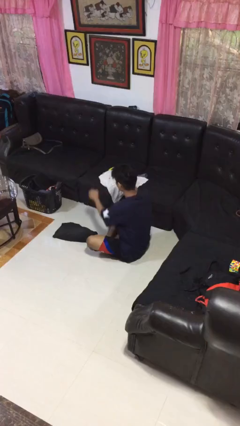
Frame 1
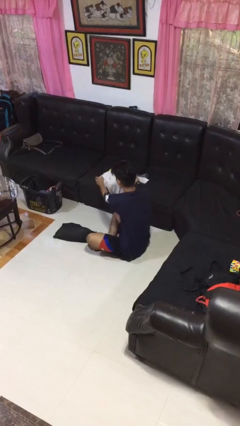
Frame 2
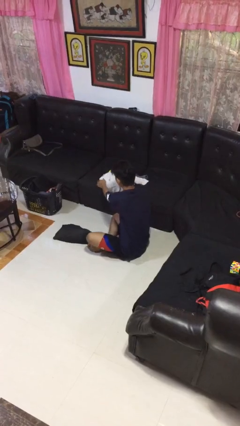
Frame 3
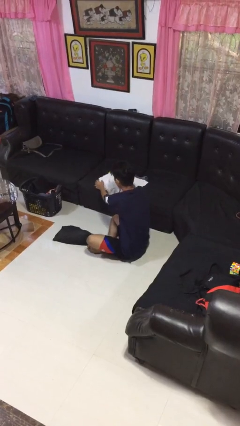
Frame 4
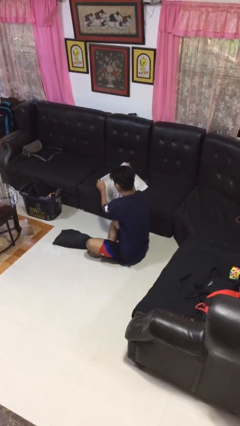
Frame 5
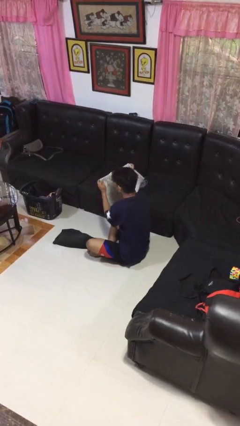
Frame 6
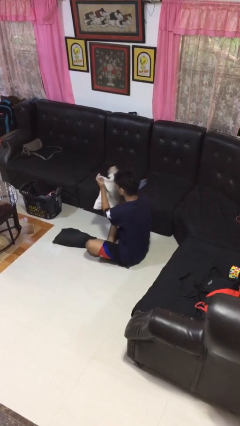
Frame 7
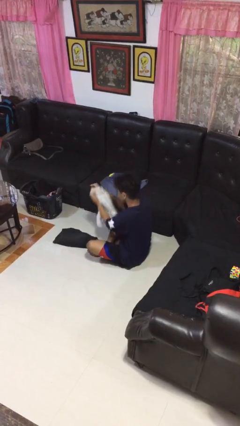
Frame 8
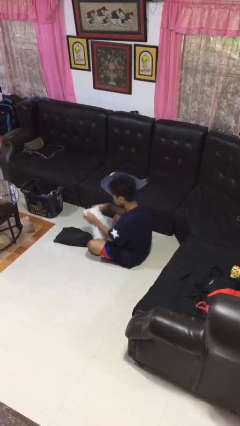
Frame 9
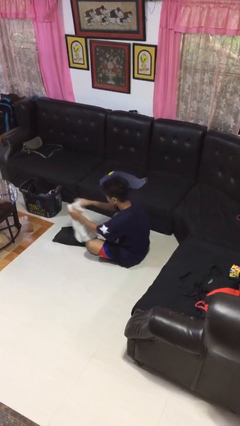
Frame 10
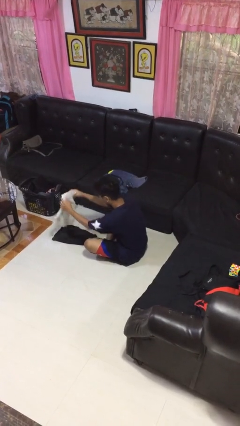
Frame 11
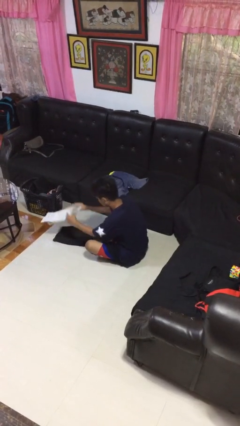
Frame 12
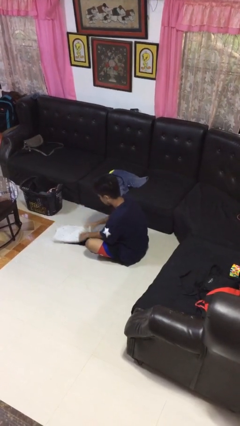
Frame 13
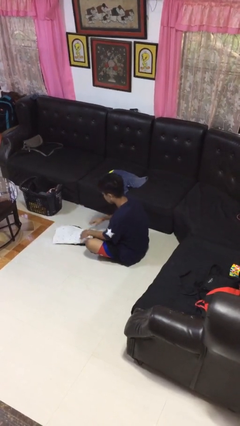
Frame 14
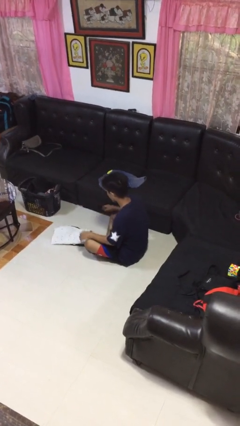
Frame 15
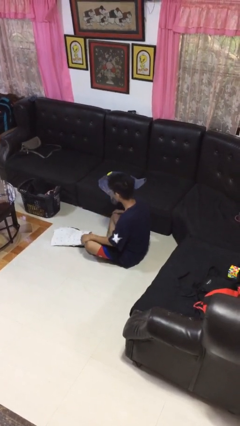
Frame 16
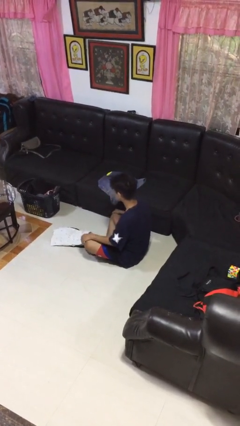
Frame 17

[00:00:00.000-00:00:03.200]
person folds pants

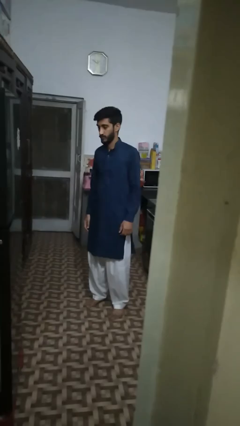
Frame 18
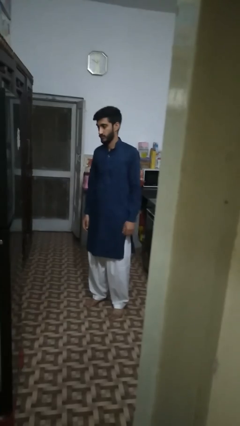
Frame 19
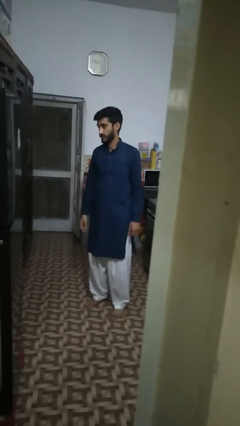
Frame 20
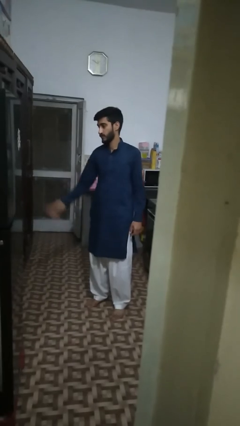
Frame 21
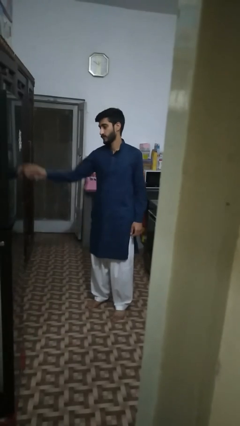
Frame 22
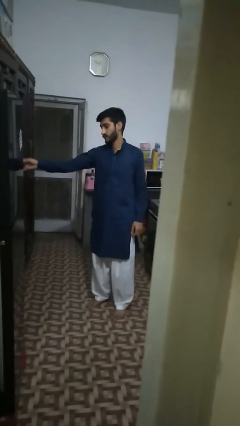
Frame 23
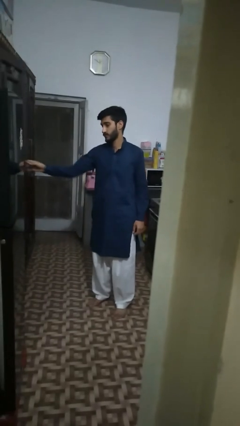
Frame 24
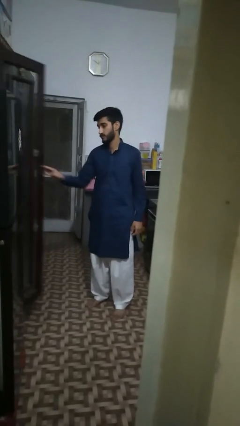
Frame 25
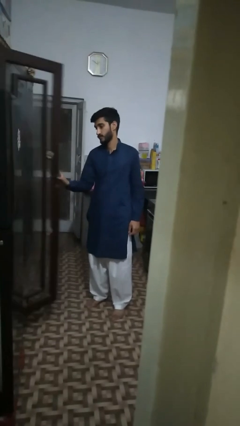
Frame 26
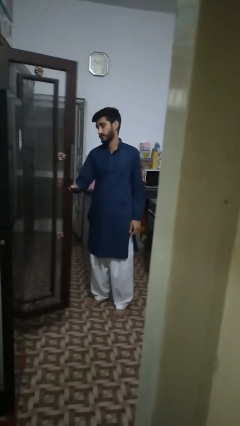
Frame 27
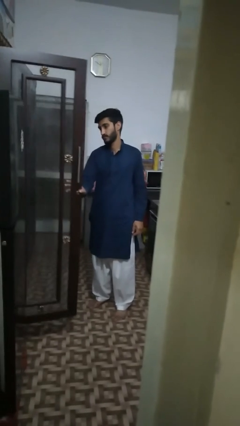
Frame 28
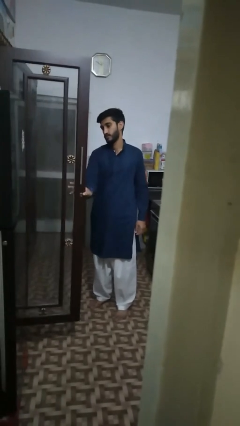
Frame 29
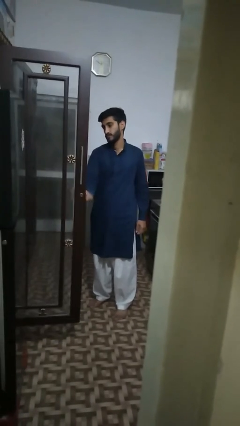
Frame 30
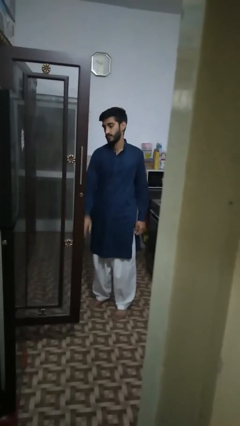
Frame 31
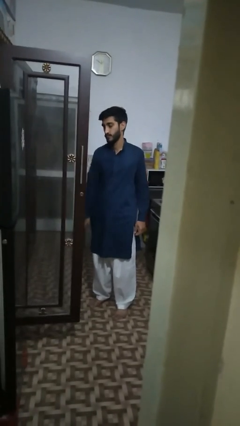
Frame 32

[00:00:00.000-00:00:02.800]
person opens cabinet

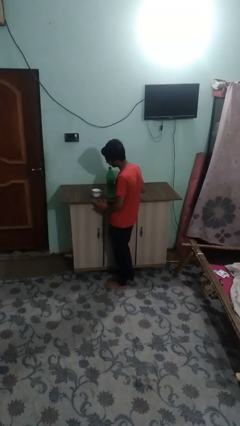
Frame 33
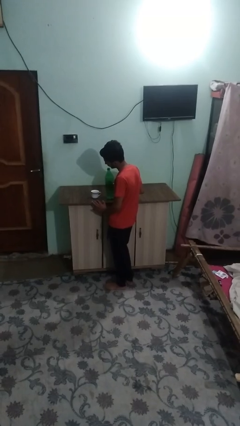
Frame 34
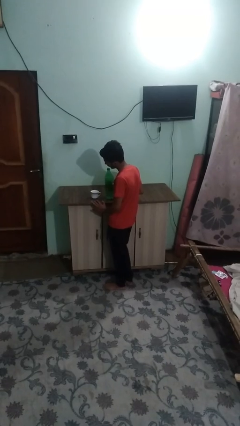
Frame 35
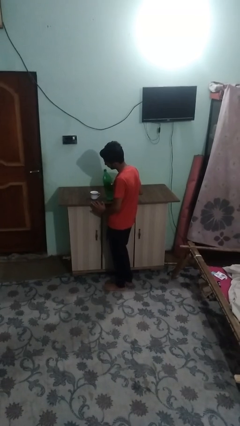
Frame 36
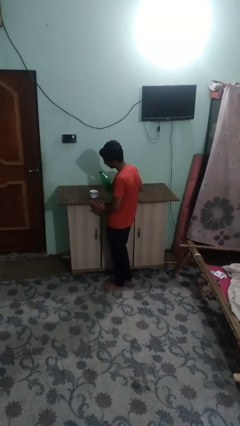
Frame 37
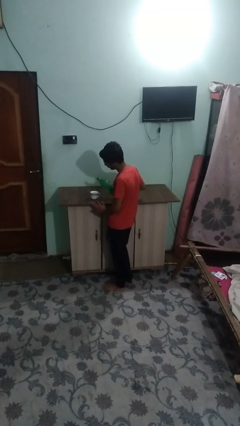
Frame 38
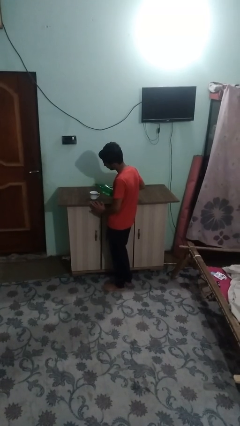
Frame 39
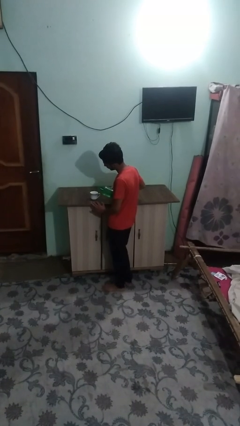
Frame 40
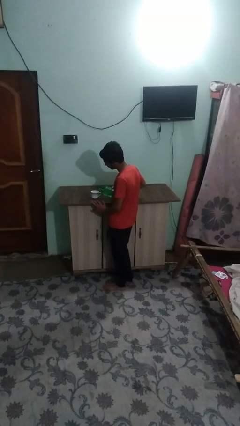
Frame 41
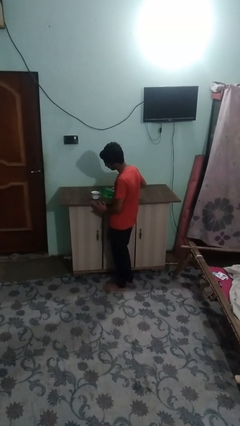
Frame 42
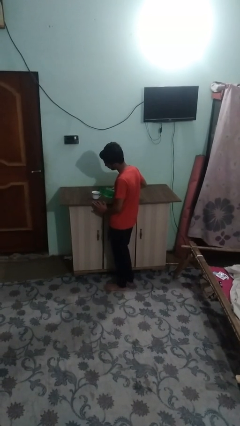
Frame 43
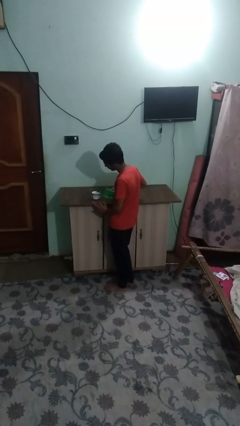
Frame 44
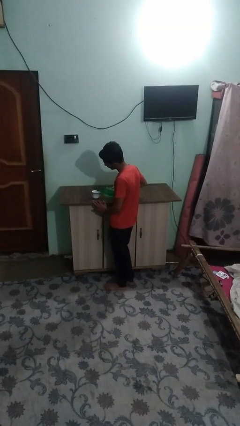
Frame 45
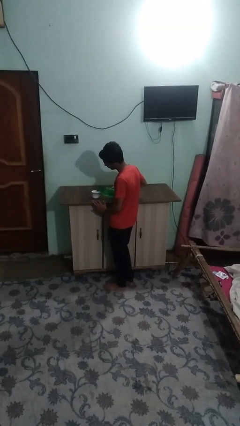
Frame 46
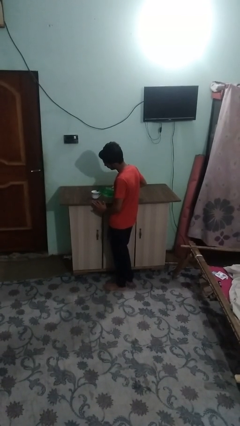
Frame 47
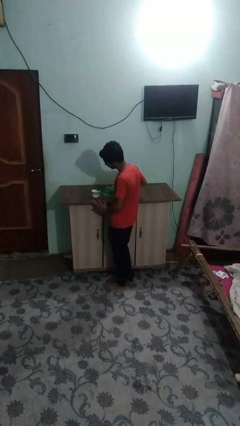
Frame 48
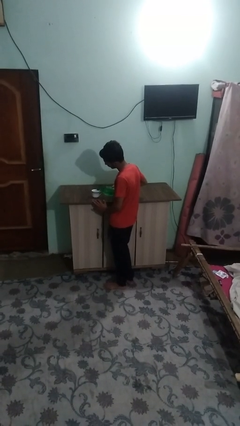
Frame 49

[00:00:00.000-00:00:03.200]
person pours liquid into cup

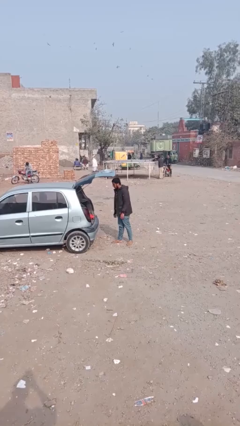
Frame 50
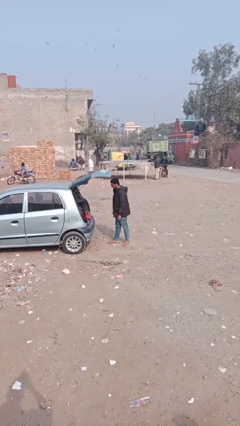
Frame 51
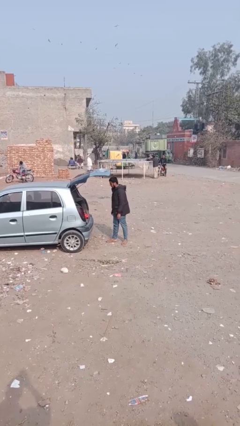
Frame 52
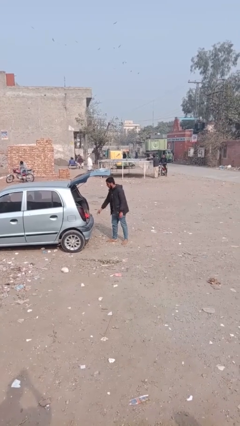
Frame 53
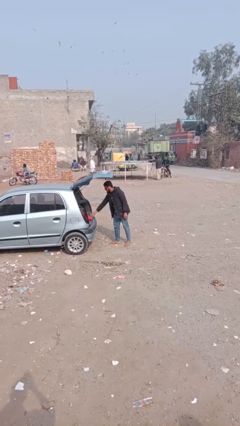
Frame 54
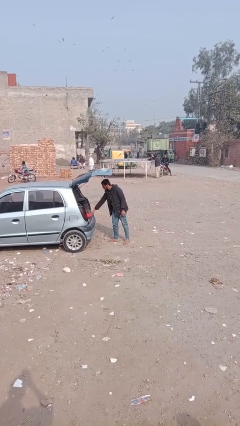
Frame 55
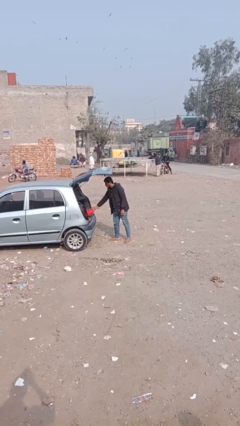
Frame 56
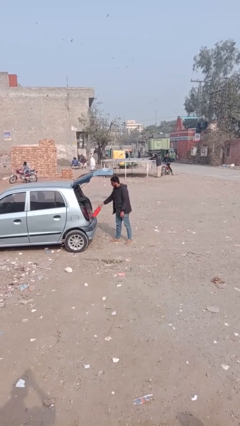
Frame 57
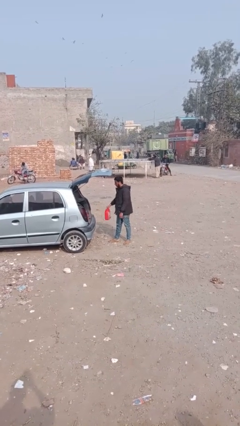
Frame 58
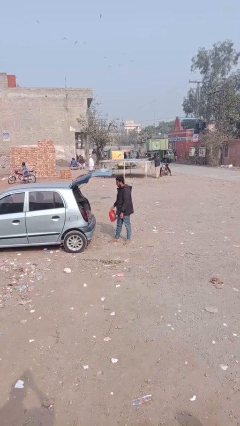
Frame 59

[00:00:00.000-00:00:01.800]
person unloads car

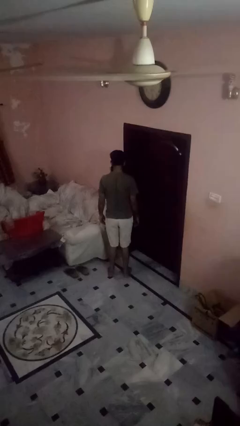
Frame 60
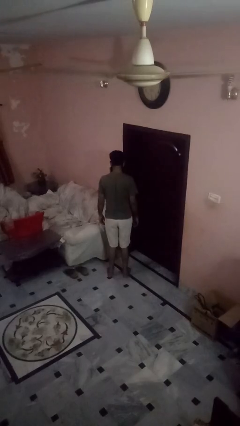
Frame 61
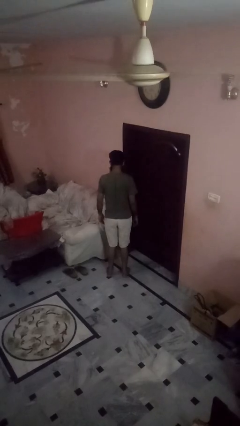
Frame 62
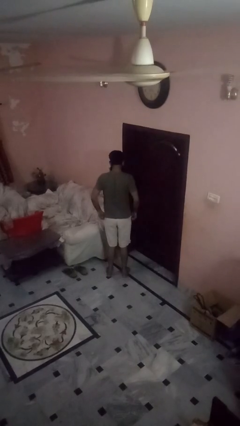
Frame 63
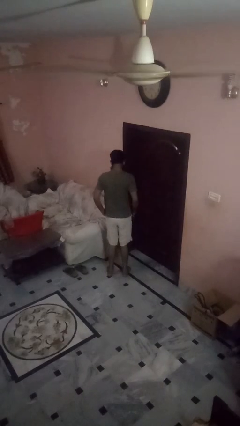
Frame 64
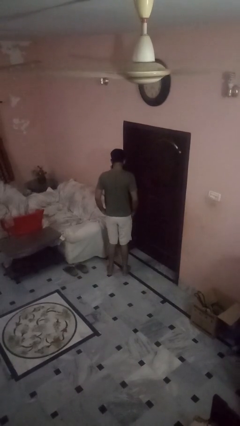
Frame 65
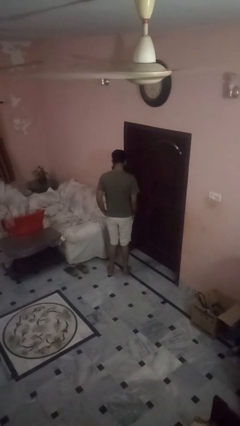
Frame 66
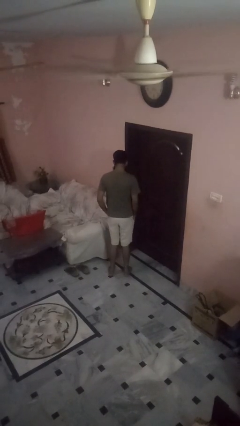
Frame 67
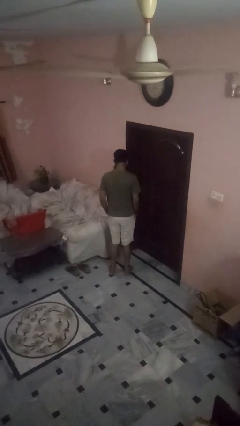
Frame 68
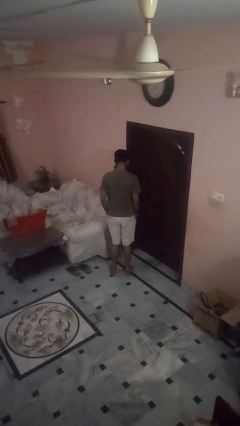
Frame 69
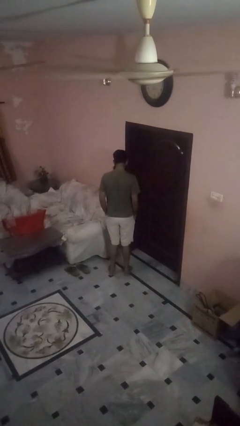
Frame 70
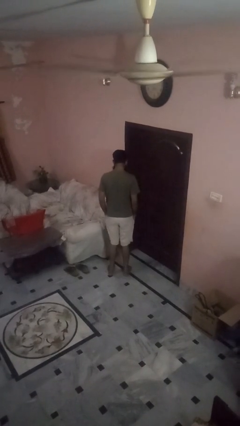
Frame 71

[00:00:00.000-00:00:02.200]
person puts hands in back pockets

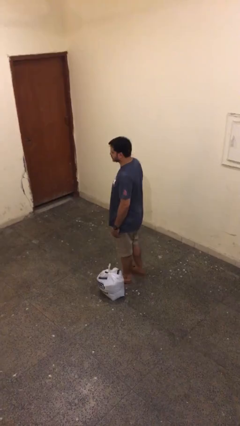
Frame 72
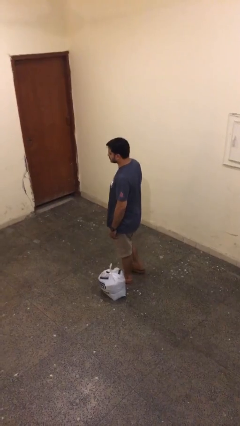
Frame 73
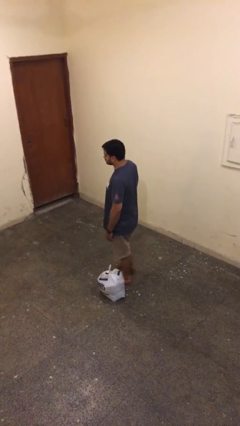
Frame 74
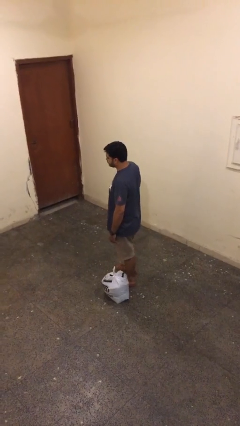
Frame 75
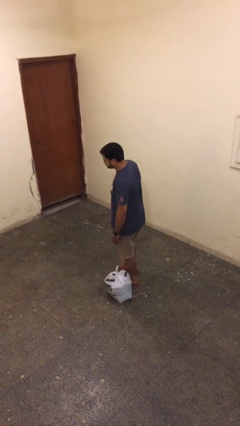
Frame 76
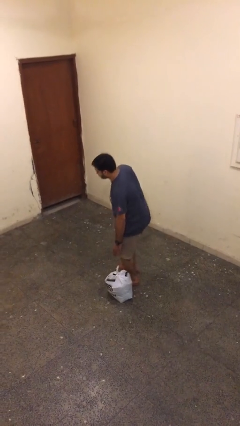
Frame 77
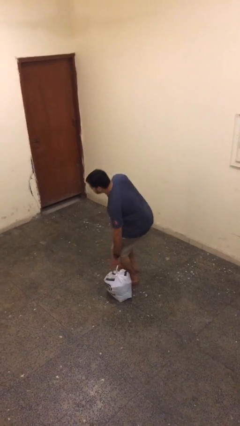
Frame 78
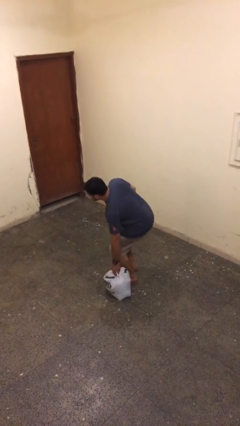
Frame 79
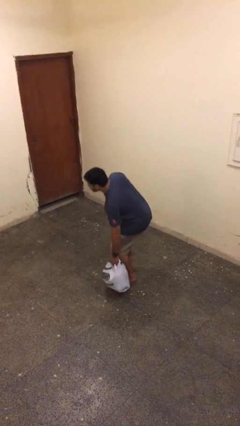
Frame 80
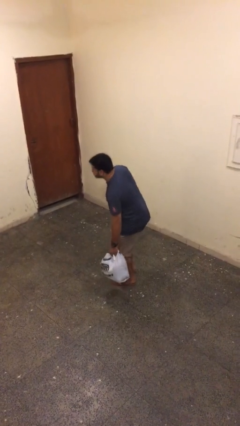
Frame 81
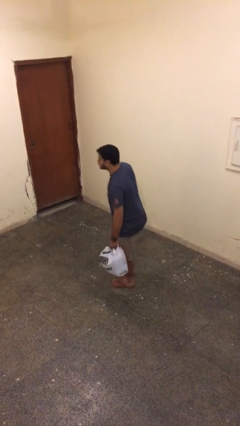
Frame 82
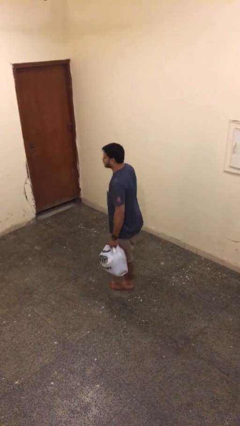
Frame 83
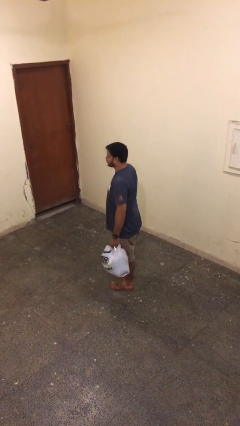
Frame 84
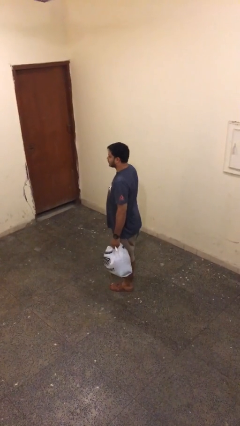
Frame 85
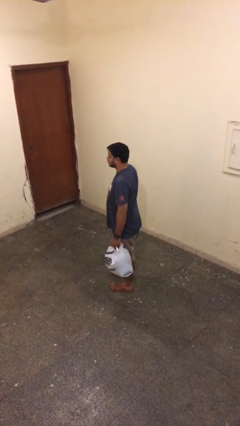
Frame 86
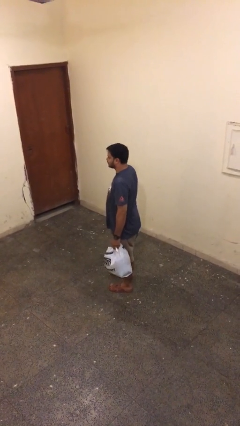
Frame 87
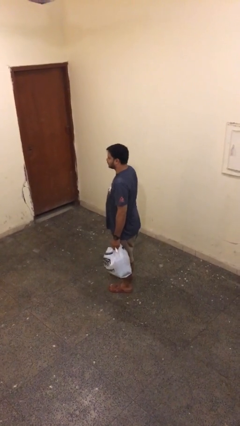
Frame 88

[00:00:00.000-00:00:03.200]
person picks up object from floor

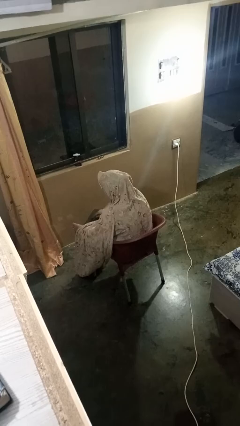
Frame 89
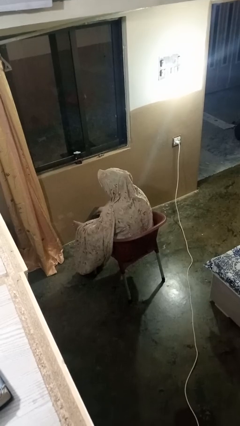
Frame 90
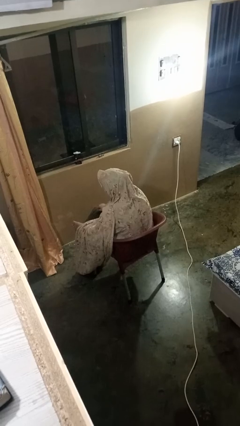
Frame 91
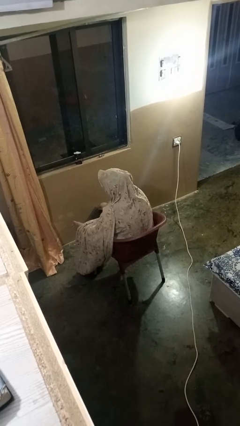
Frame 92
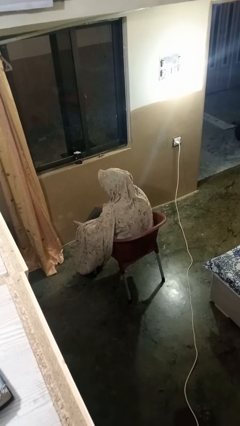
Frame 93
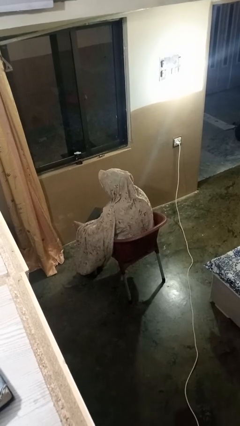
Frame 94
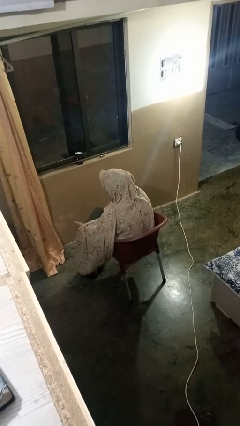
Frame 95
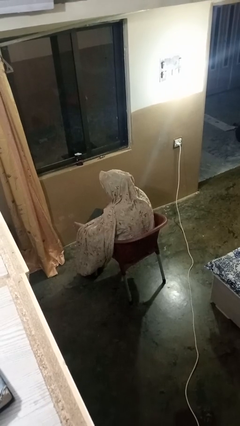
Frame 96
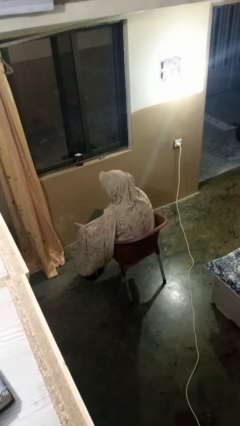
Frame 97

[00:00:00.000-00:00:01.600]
person interacts with tablet
